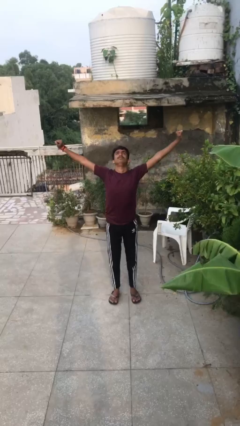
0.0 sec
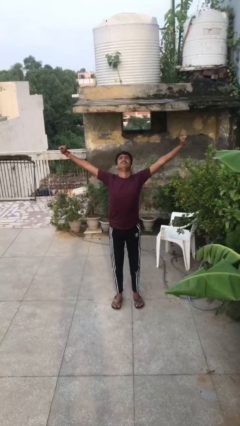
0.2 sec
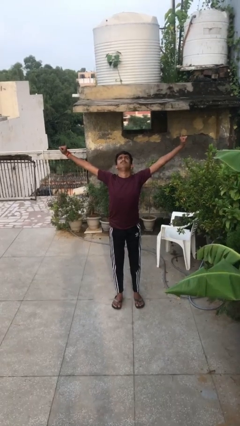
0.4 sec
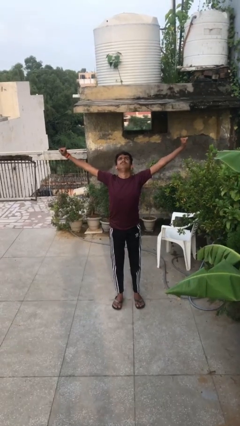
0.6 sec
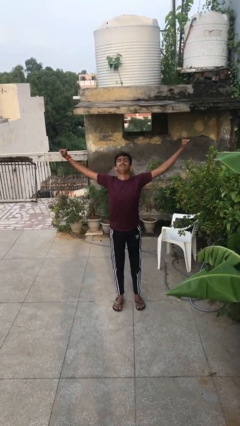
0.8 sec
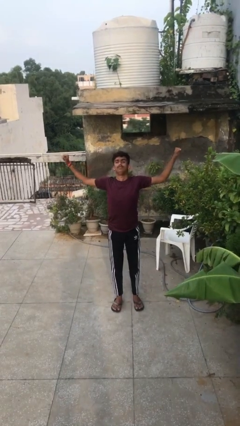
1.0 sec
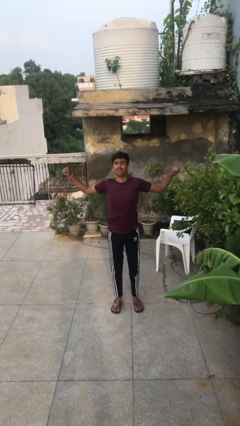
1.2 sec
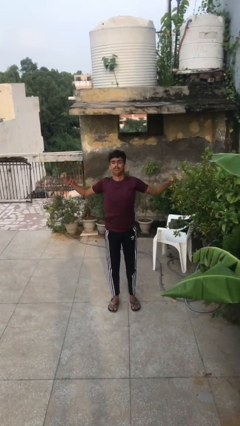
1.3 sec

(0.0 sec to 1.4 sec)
person stretches arms to side

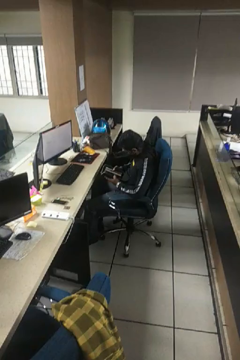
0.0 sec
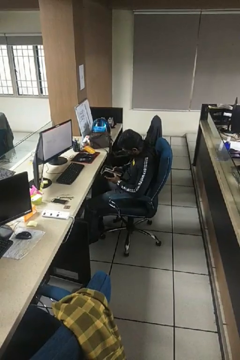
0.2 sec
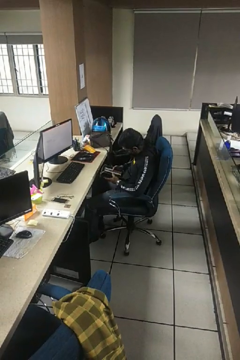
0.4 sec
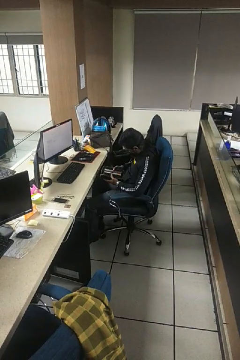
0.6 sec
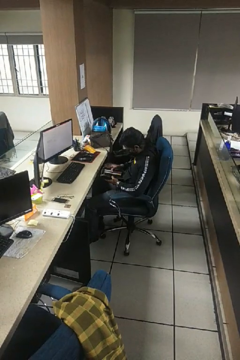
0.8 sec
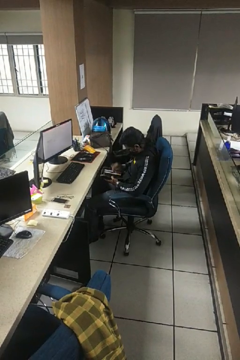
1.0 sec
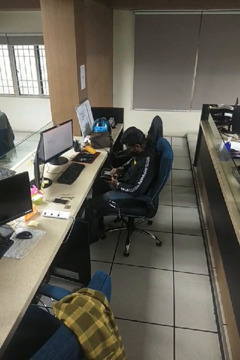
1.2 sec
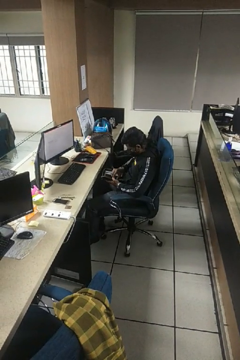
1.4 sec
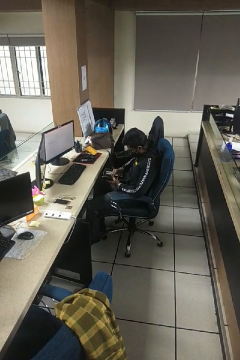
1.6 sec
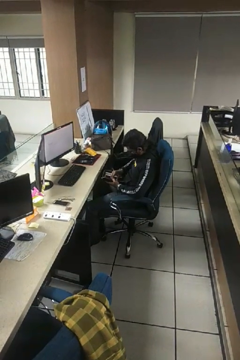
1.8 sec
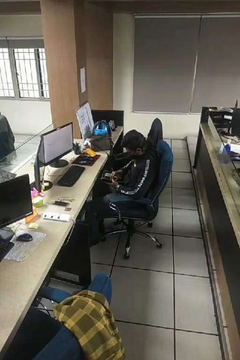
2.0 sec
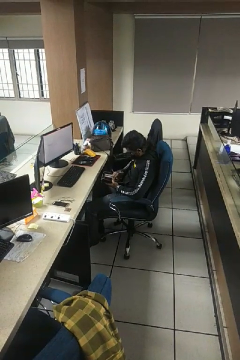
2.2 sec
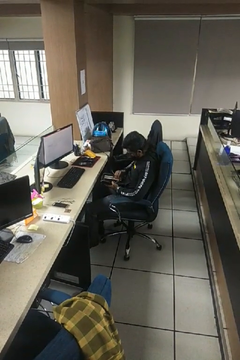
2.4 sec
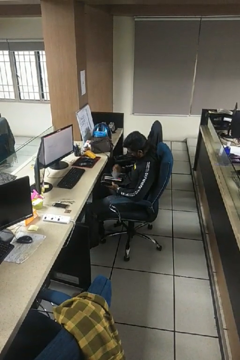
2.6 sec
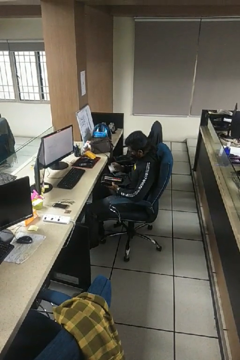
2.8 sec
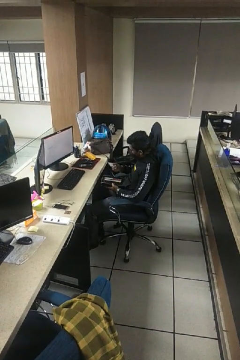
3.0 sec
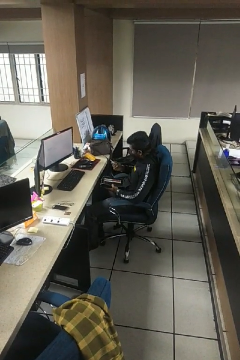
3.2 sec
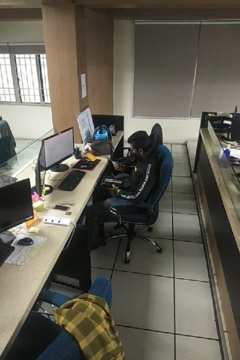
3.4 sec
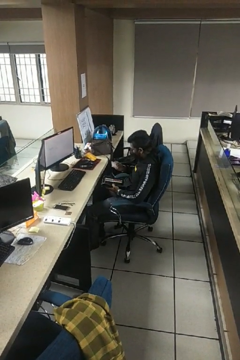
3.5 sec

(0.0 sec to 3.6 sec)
person takes object from purse

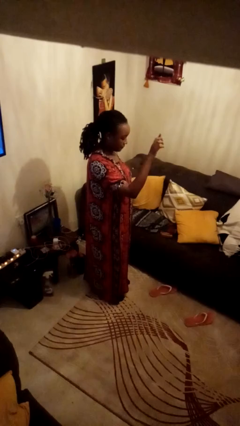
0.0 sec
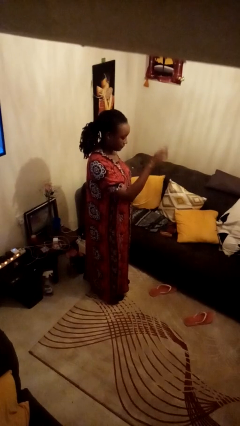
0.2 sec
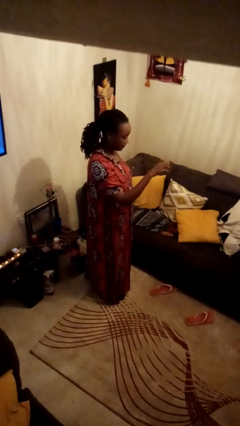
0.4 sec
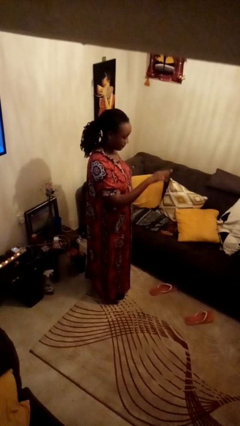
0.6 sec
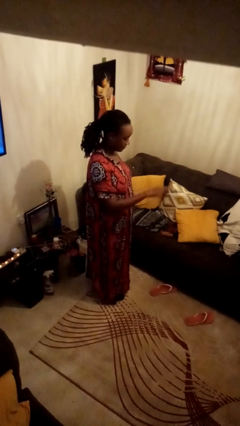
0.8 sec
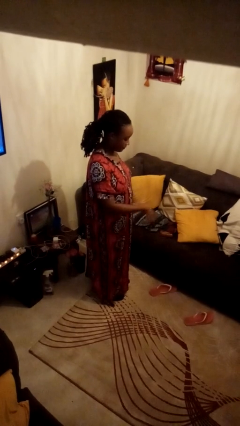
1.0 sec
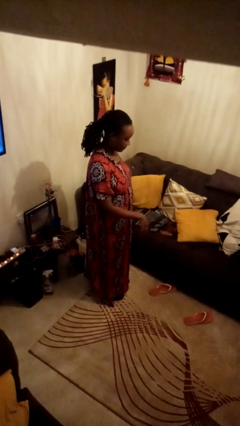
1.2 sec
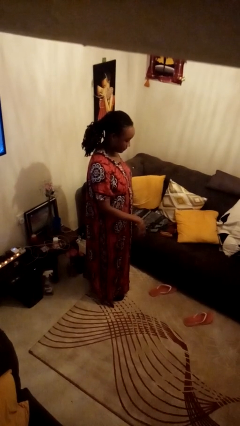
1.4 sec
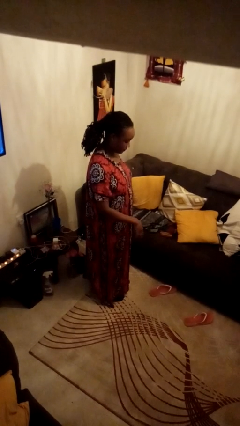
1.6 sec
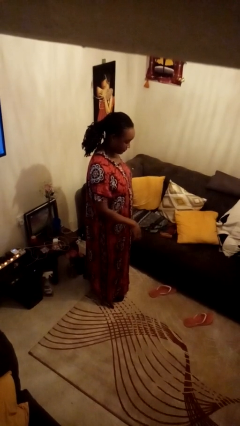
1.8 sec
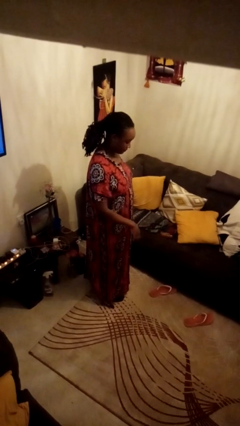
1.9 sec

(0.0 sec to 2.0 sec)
person gestures swipe down

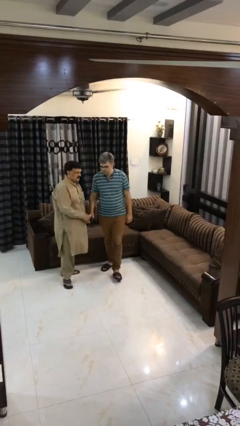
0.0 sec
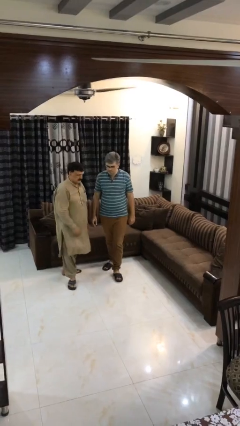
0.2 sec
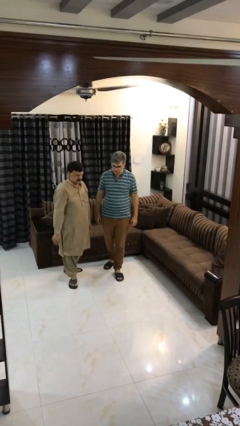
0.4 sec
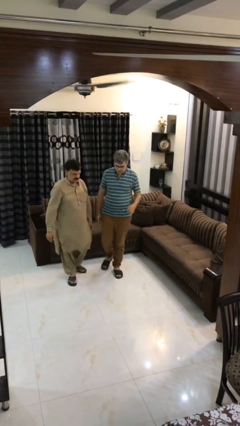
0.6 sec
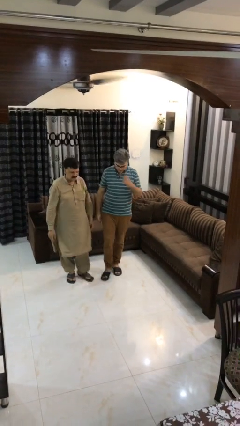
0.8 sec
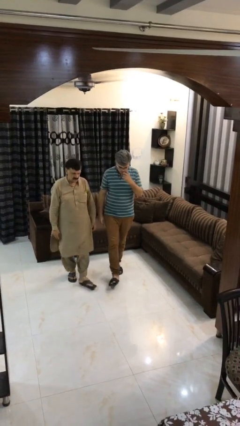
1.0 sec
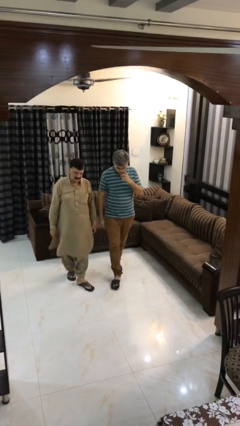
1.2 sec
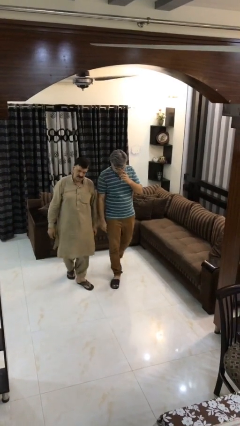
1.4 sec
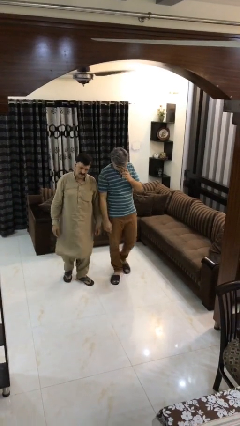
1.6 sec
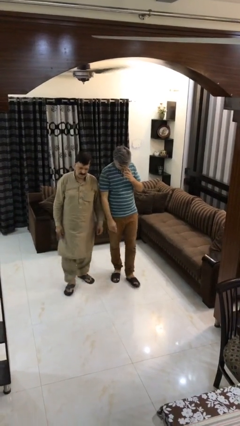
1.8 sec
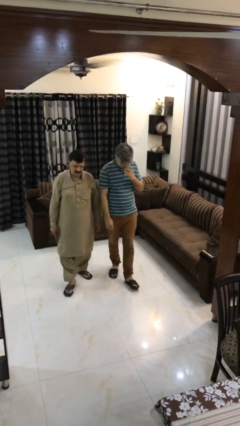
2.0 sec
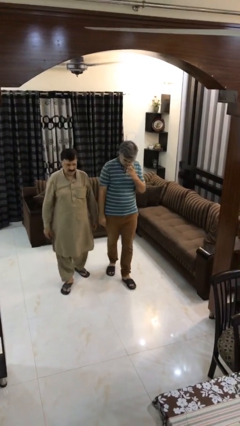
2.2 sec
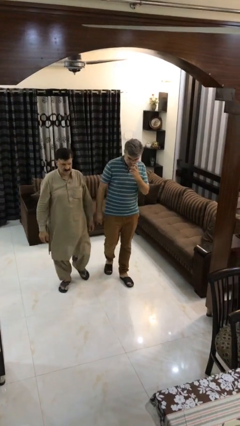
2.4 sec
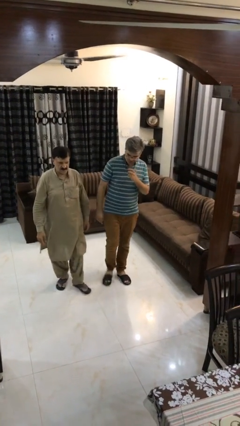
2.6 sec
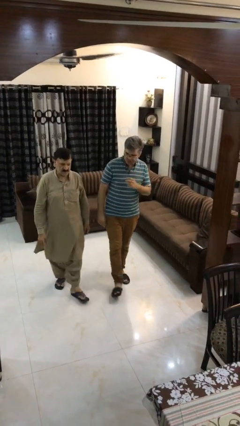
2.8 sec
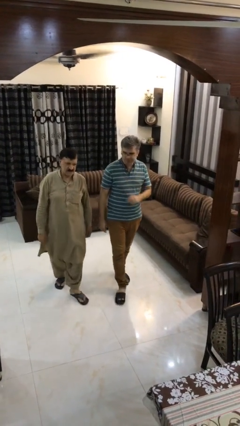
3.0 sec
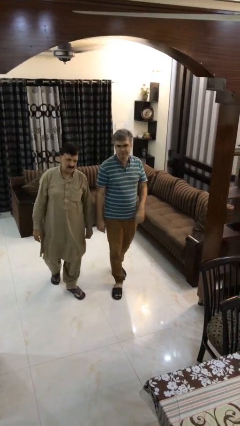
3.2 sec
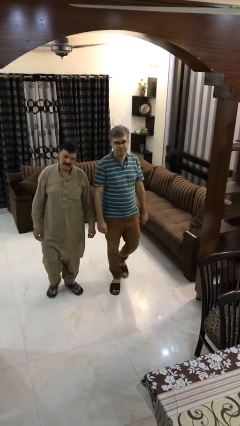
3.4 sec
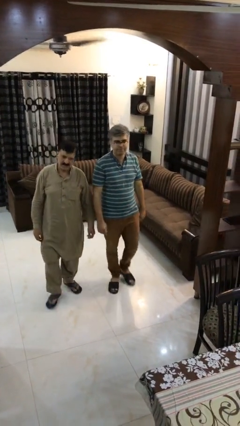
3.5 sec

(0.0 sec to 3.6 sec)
person talks to person

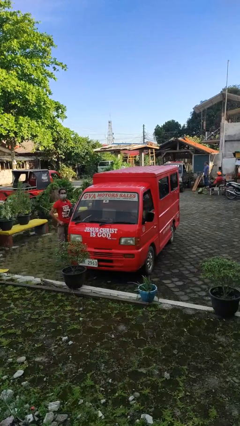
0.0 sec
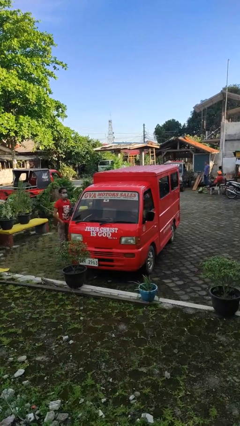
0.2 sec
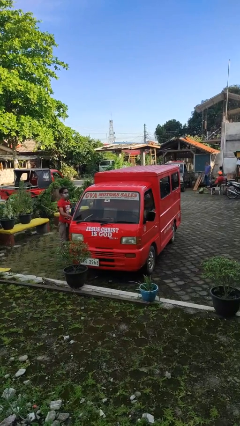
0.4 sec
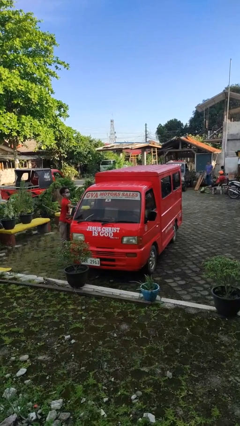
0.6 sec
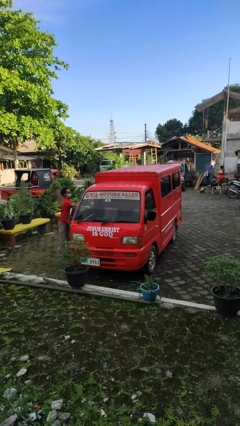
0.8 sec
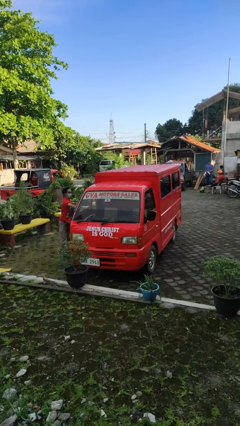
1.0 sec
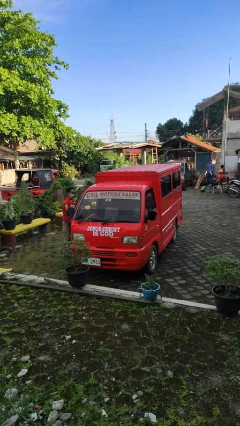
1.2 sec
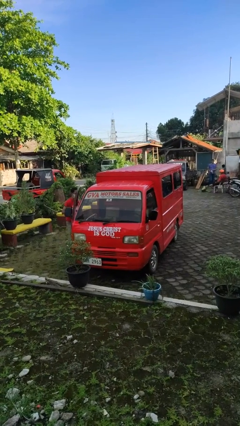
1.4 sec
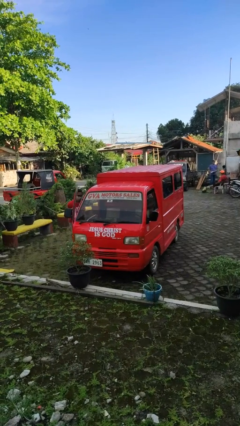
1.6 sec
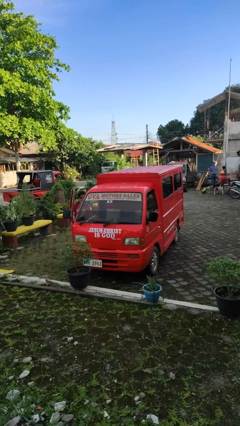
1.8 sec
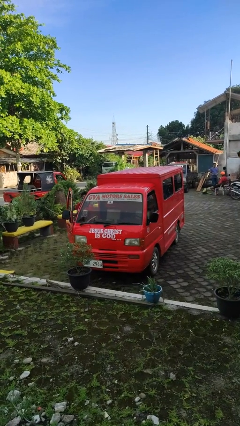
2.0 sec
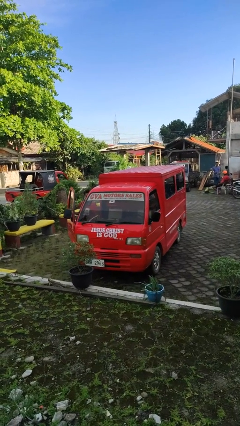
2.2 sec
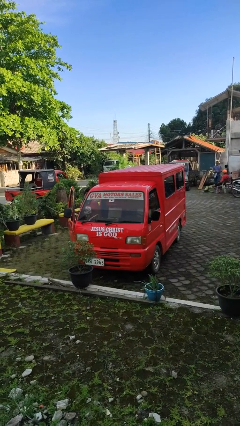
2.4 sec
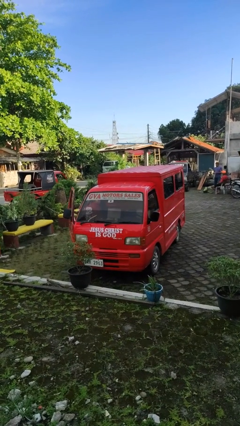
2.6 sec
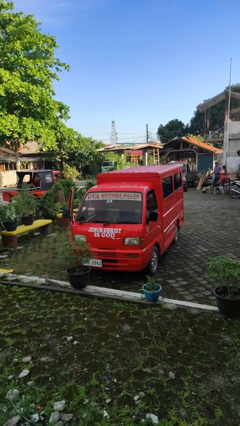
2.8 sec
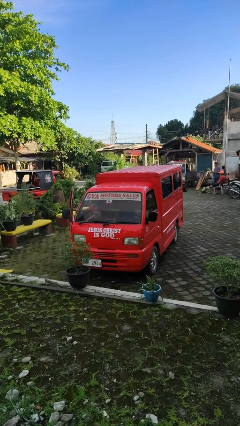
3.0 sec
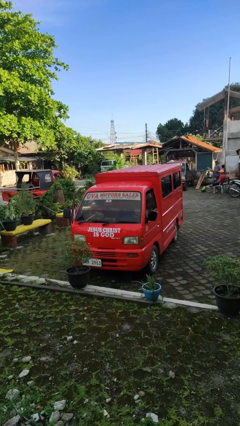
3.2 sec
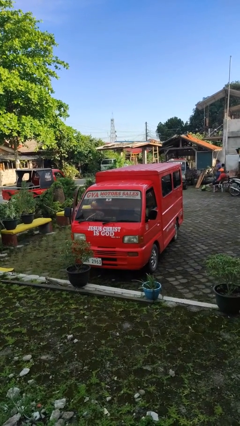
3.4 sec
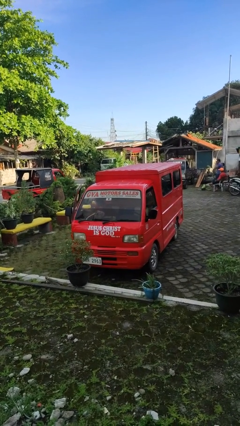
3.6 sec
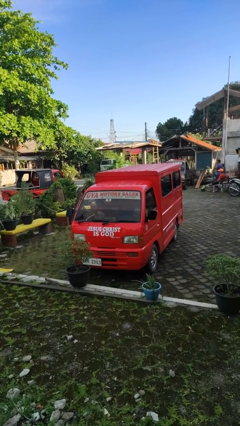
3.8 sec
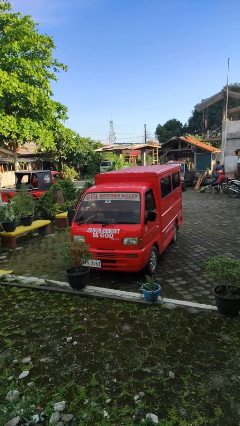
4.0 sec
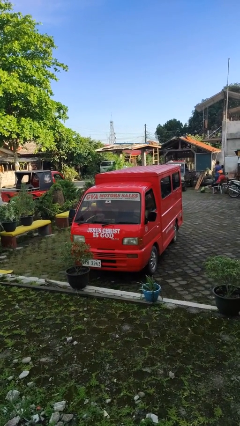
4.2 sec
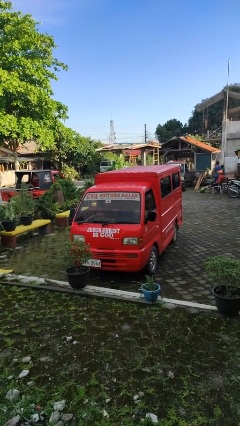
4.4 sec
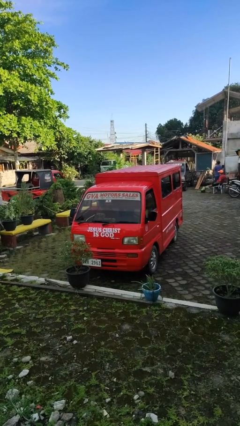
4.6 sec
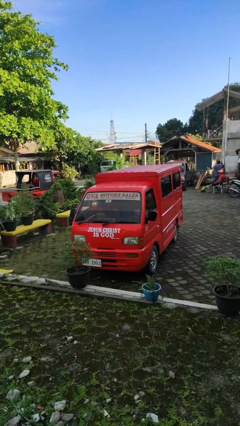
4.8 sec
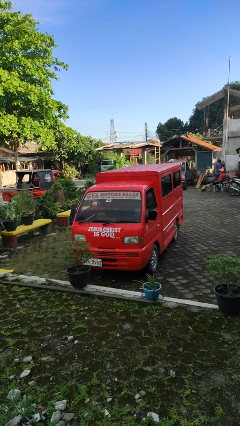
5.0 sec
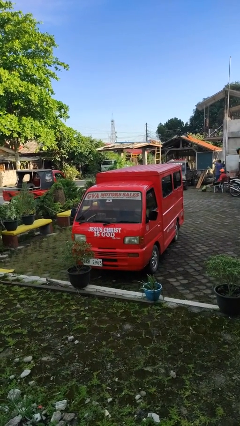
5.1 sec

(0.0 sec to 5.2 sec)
car picks up person

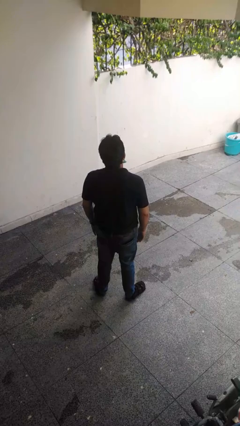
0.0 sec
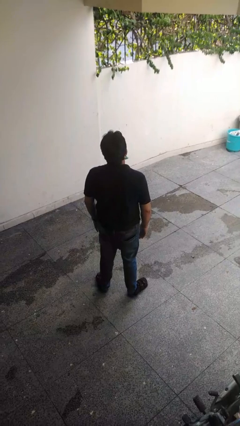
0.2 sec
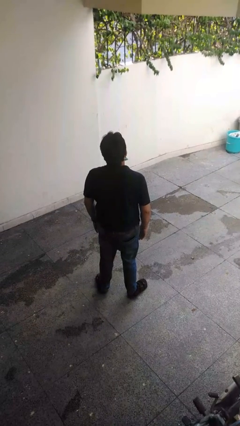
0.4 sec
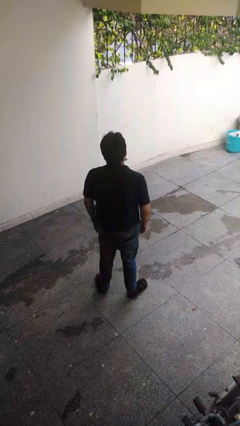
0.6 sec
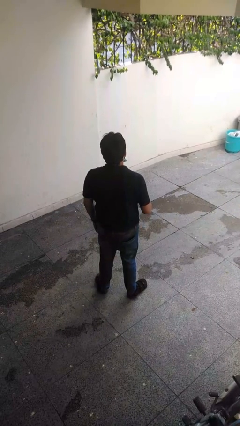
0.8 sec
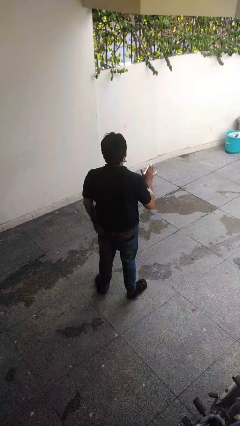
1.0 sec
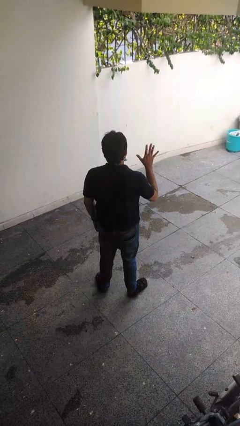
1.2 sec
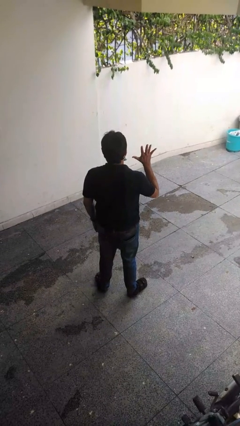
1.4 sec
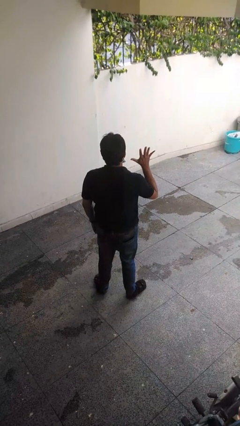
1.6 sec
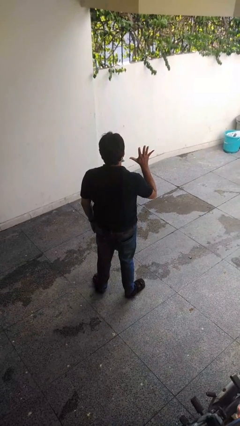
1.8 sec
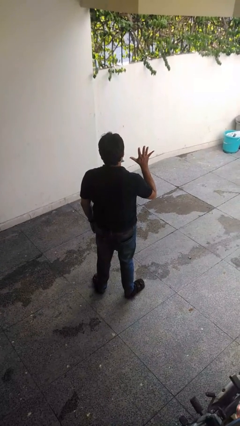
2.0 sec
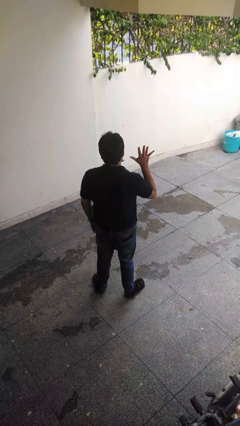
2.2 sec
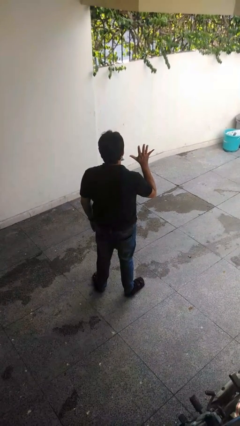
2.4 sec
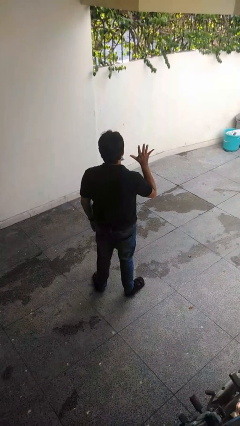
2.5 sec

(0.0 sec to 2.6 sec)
person gestures number five

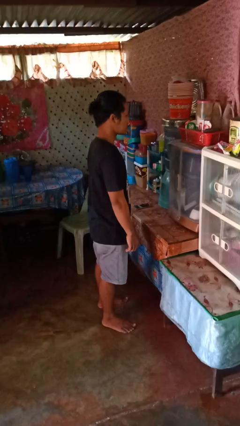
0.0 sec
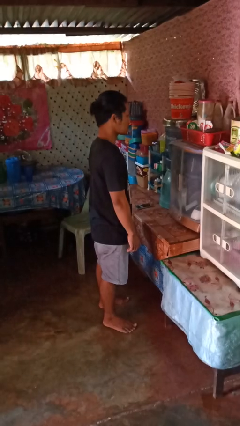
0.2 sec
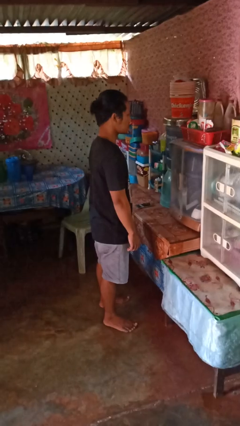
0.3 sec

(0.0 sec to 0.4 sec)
person closes cabinet
